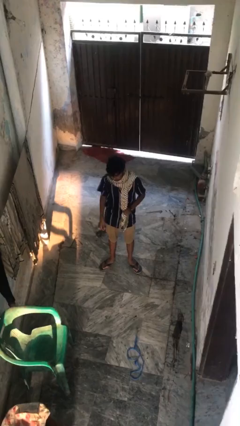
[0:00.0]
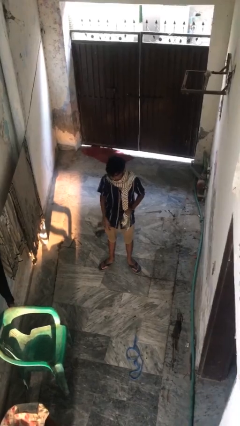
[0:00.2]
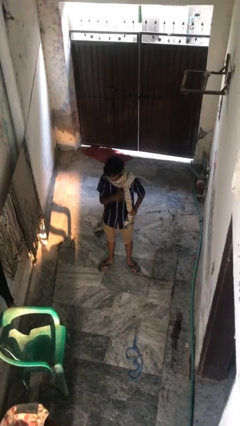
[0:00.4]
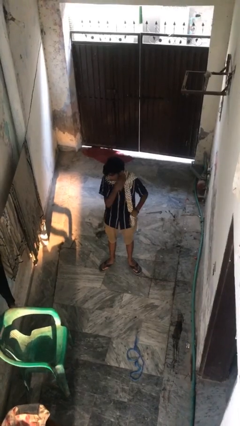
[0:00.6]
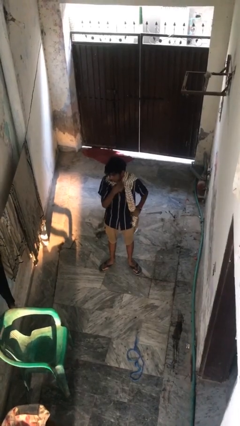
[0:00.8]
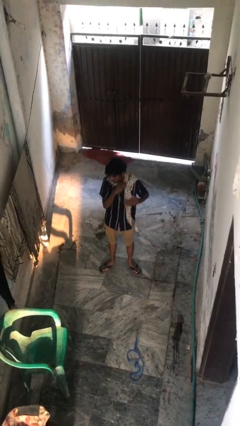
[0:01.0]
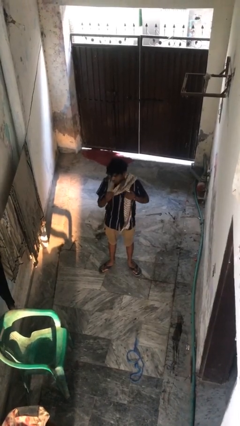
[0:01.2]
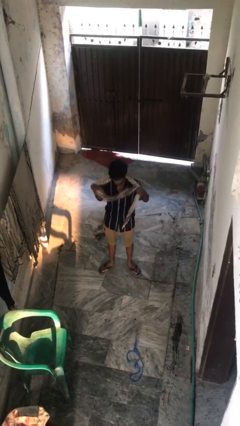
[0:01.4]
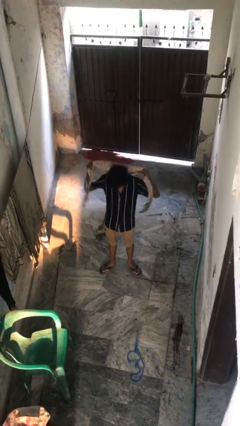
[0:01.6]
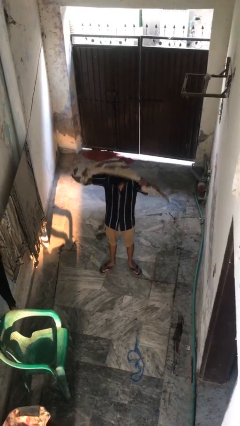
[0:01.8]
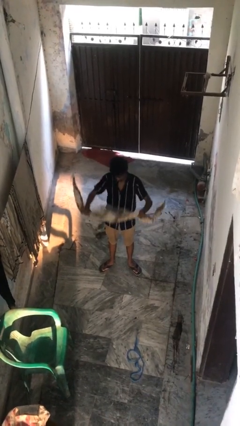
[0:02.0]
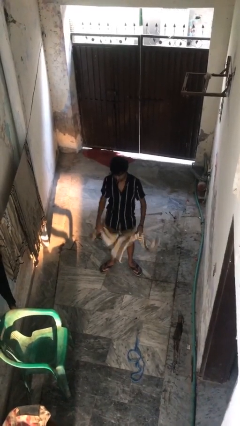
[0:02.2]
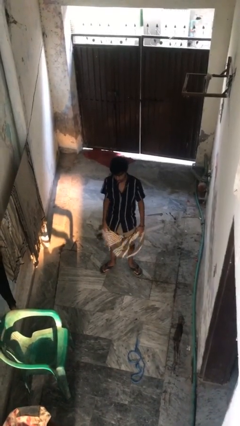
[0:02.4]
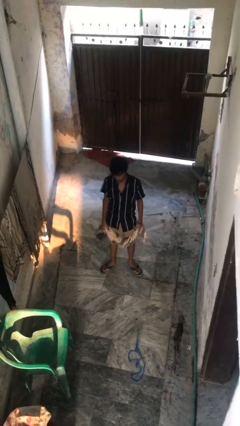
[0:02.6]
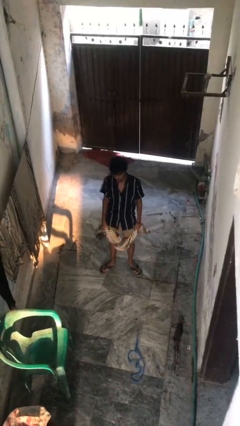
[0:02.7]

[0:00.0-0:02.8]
person takes off scarf

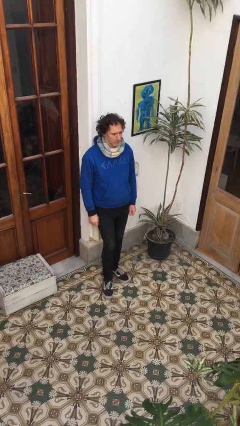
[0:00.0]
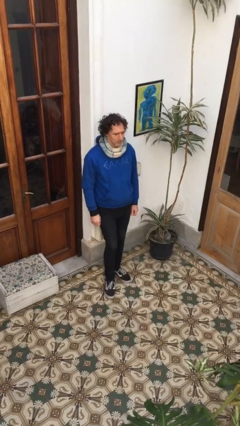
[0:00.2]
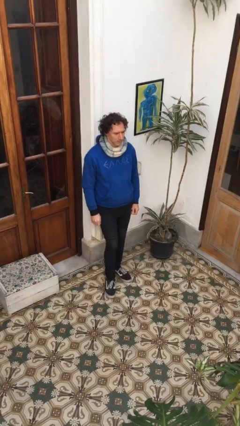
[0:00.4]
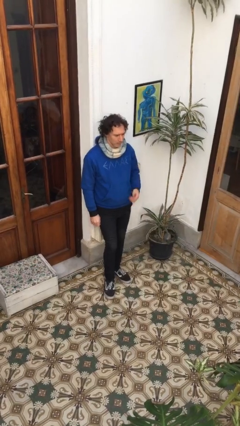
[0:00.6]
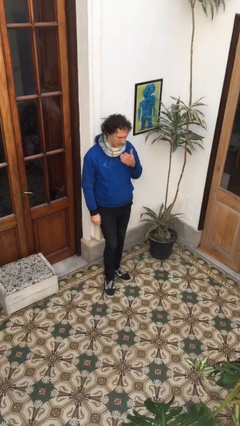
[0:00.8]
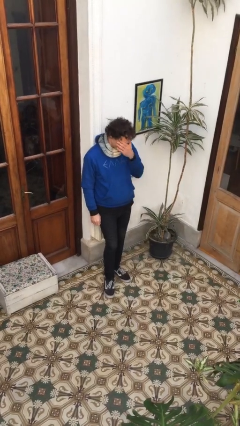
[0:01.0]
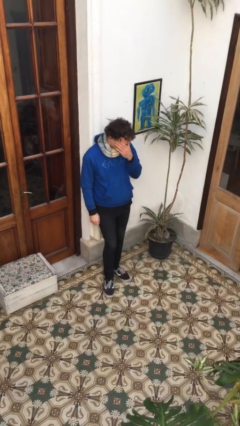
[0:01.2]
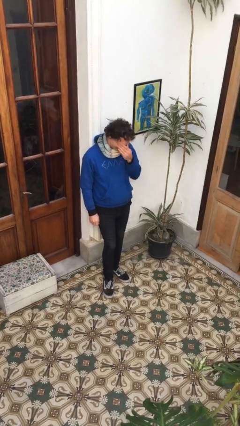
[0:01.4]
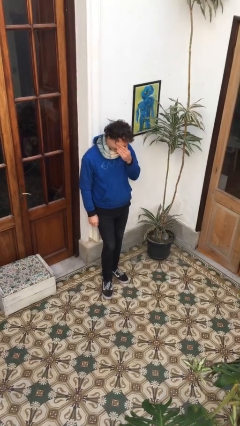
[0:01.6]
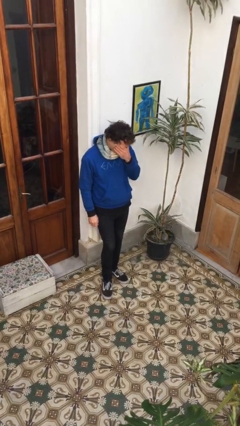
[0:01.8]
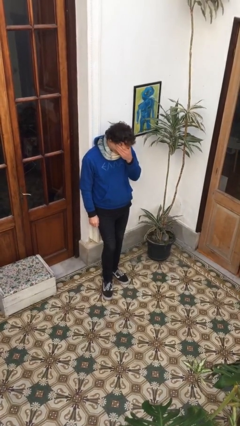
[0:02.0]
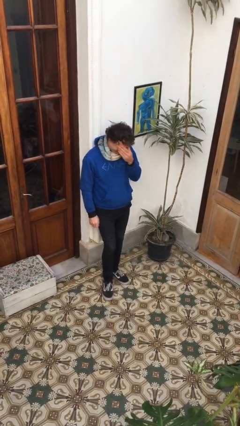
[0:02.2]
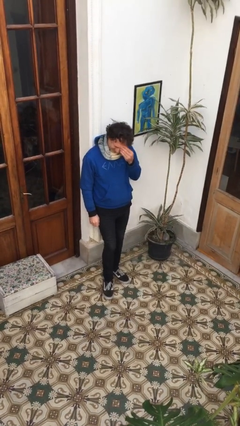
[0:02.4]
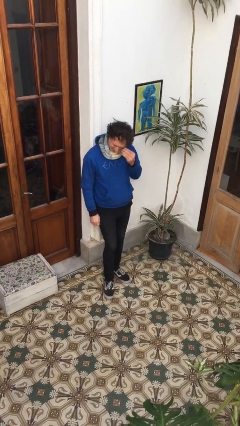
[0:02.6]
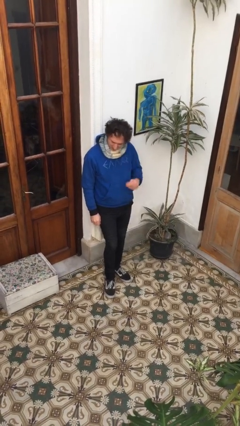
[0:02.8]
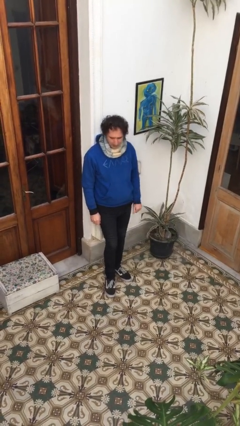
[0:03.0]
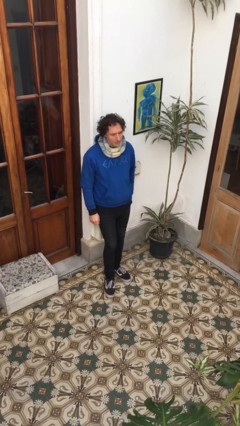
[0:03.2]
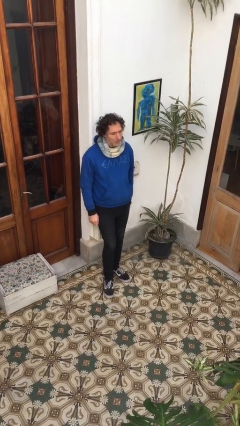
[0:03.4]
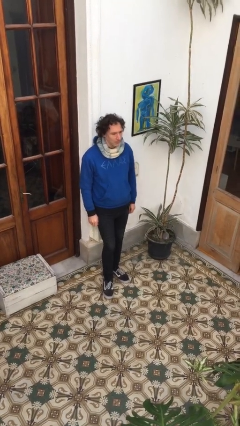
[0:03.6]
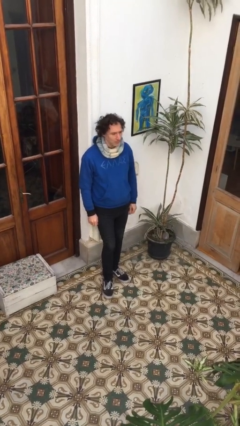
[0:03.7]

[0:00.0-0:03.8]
person scratches face

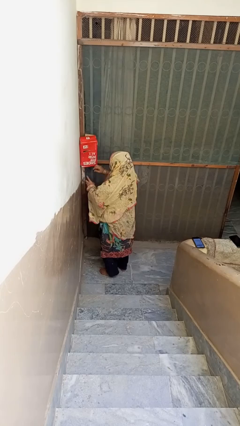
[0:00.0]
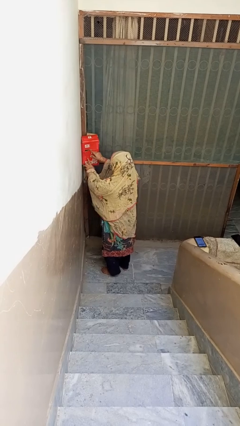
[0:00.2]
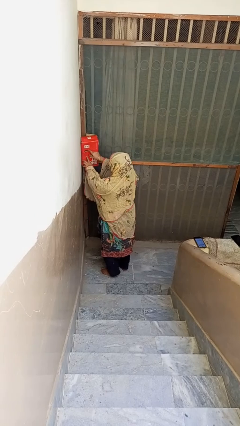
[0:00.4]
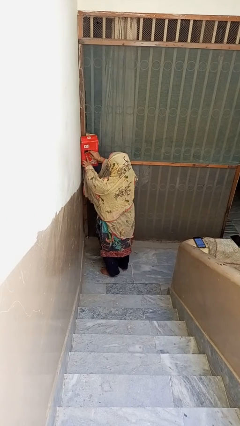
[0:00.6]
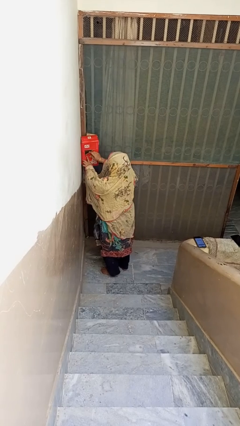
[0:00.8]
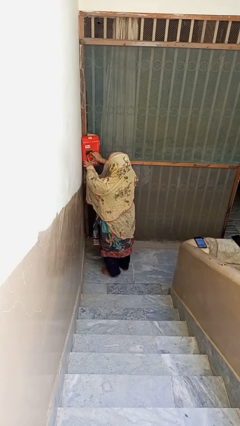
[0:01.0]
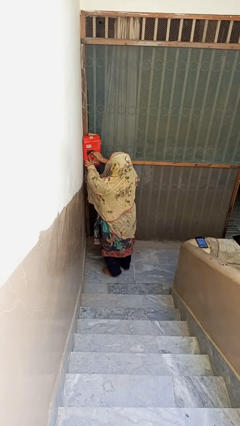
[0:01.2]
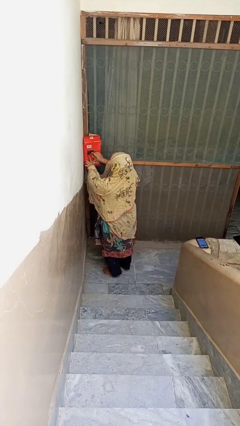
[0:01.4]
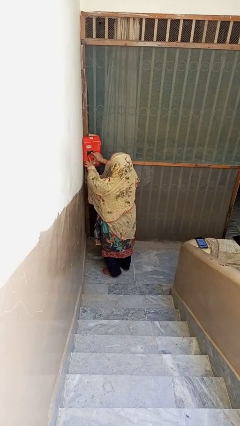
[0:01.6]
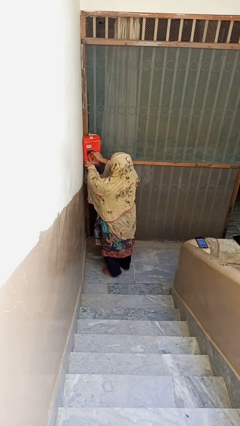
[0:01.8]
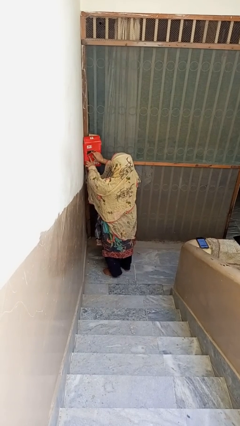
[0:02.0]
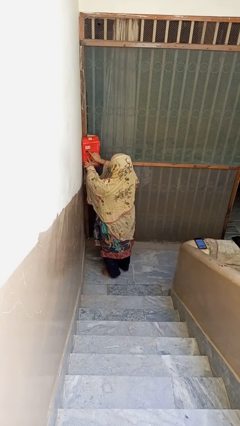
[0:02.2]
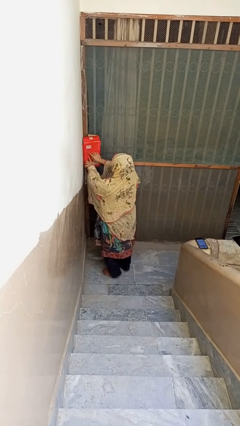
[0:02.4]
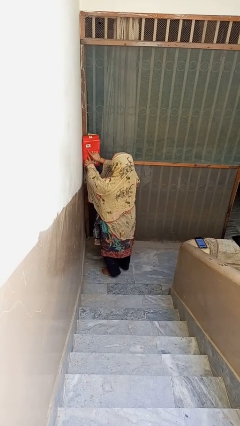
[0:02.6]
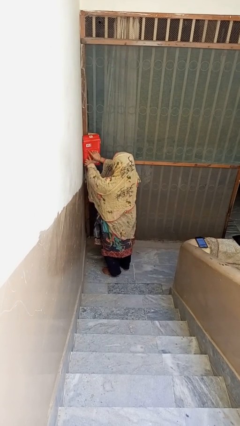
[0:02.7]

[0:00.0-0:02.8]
person opens mailbox

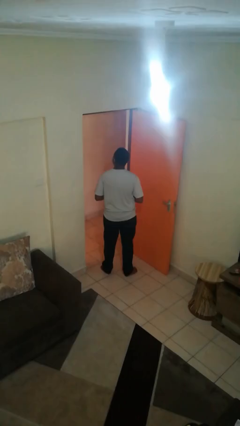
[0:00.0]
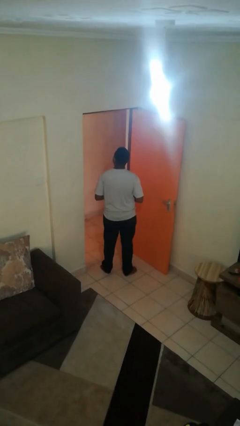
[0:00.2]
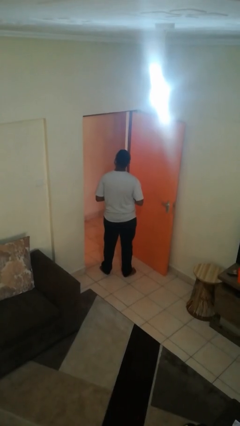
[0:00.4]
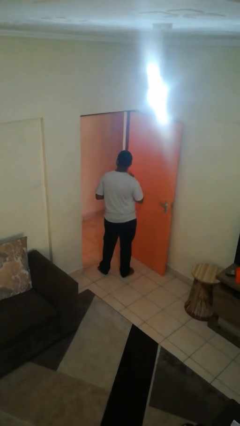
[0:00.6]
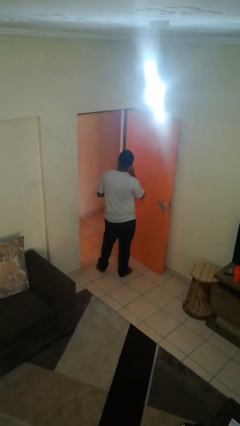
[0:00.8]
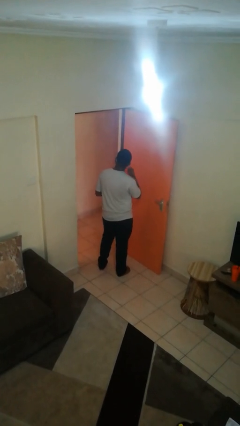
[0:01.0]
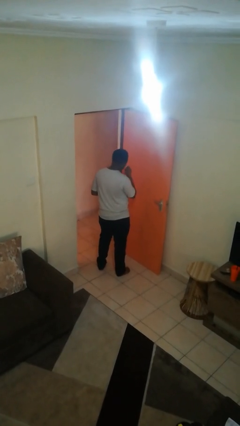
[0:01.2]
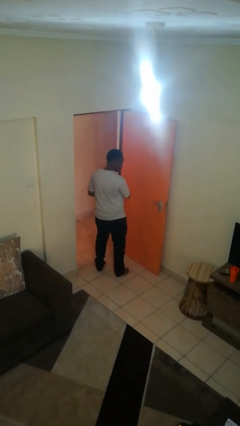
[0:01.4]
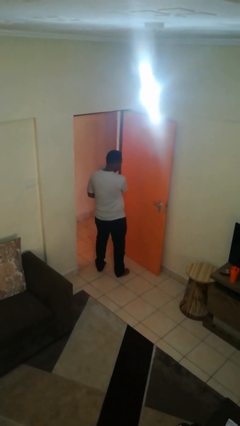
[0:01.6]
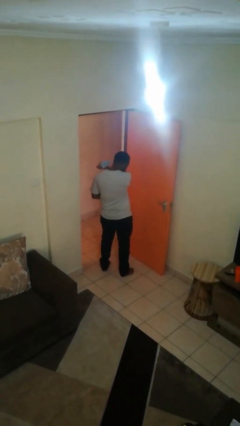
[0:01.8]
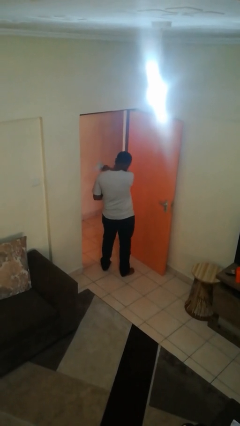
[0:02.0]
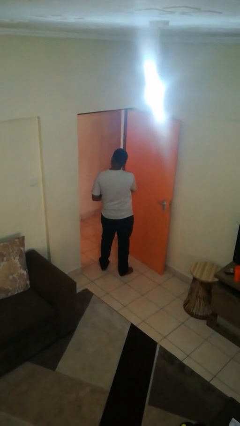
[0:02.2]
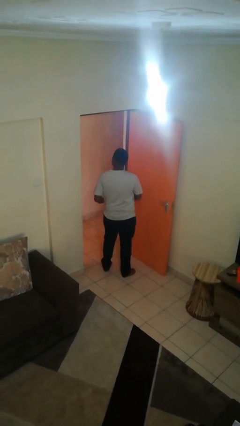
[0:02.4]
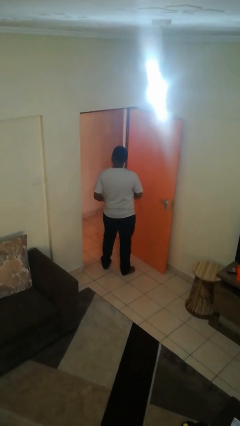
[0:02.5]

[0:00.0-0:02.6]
person takes off facemask

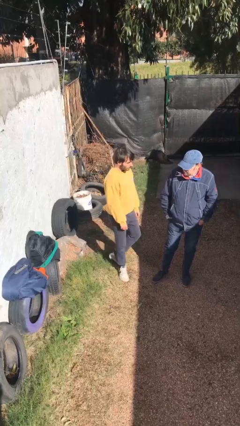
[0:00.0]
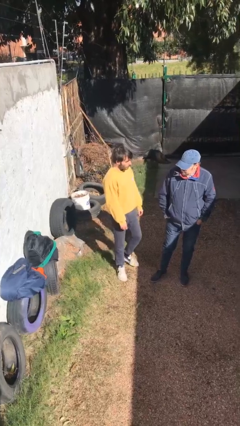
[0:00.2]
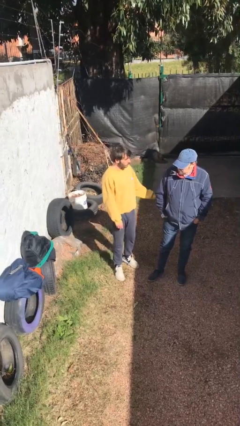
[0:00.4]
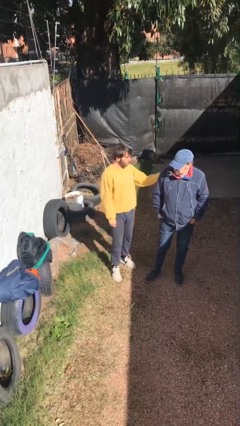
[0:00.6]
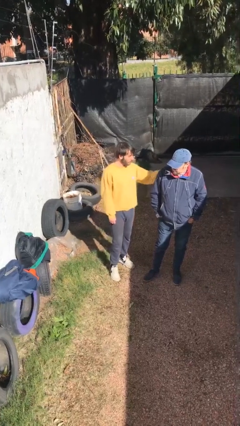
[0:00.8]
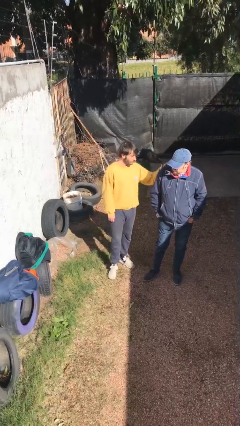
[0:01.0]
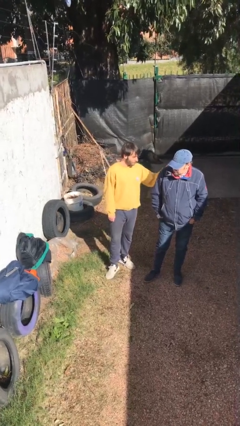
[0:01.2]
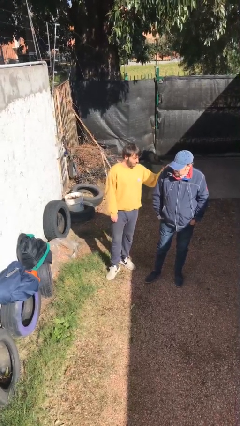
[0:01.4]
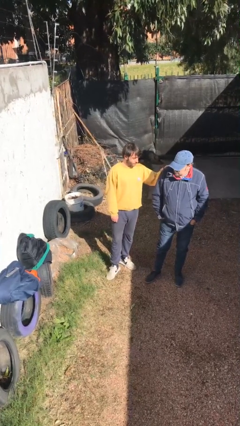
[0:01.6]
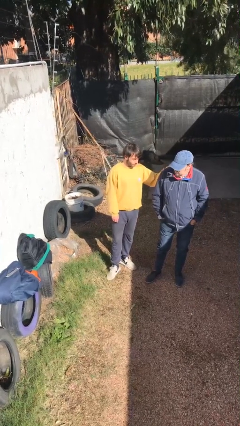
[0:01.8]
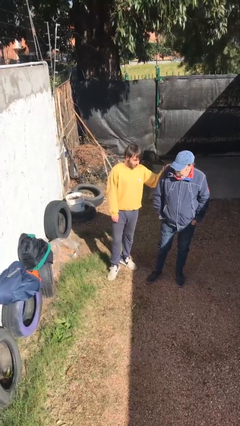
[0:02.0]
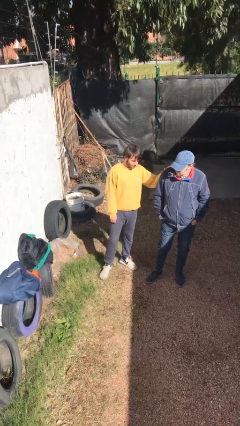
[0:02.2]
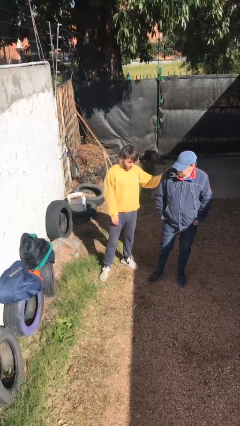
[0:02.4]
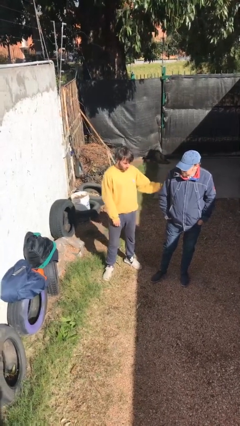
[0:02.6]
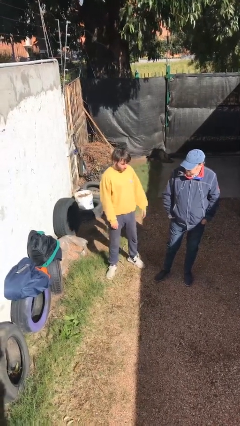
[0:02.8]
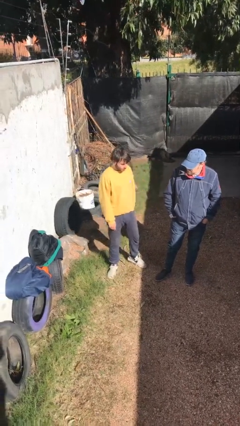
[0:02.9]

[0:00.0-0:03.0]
person pounds shoulders of person

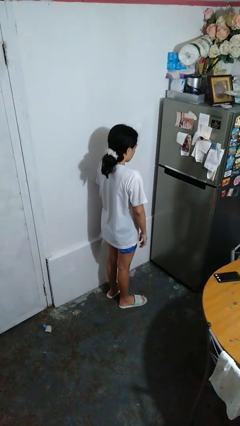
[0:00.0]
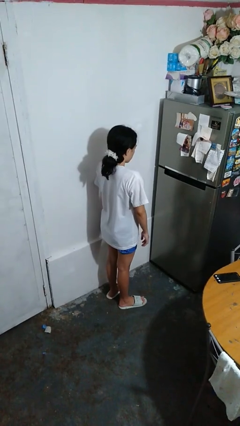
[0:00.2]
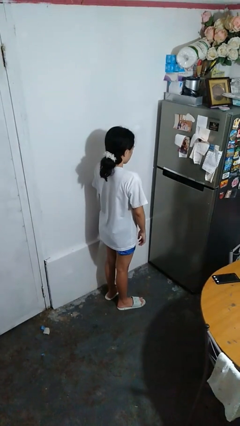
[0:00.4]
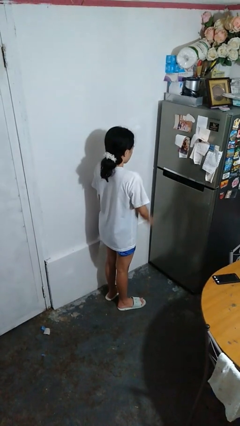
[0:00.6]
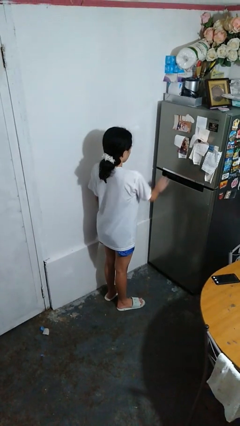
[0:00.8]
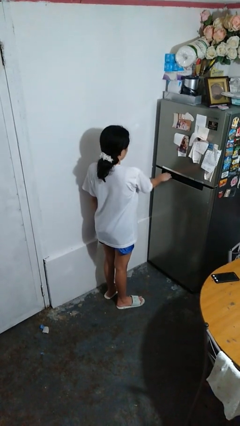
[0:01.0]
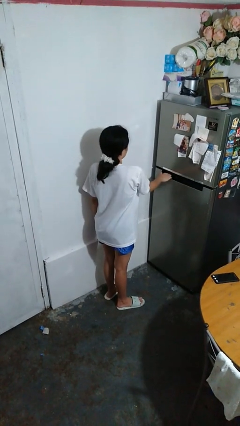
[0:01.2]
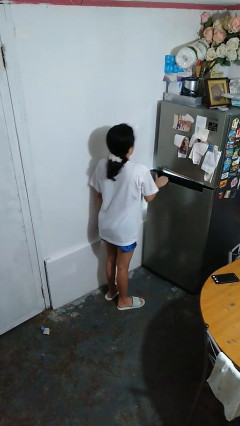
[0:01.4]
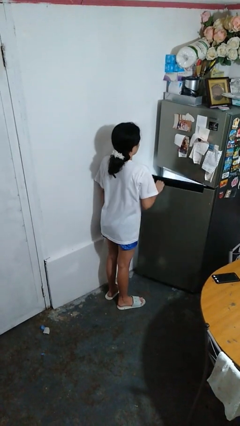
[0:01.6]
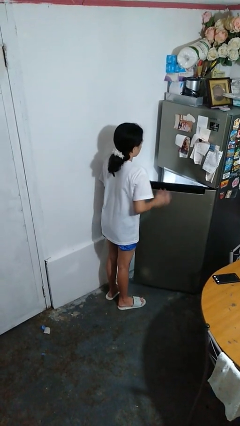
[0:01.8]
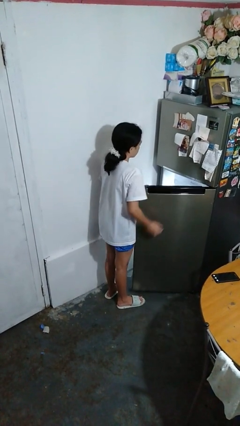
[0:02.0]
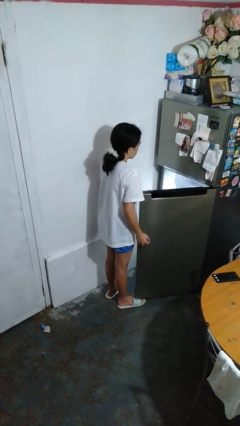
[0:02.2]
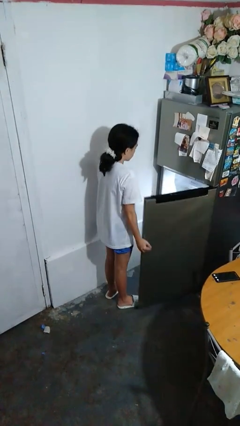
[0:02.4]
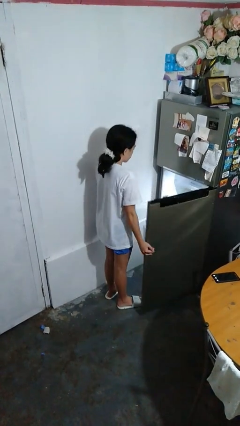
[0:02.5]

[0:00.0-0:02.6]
person opens refrigerator
